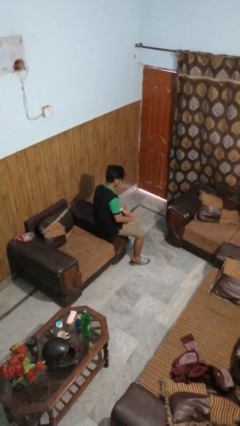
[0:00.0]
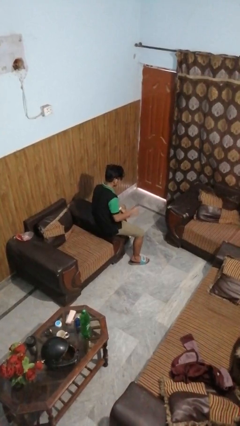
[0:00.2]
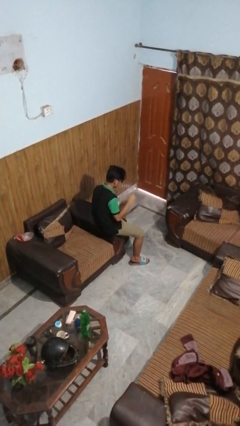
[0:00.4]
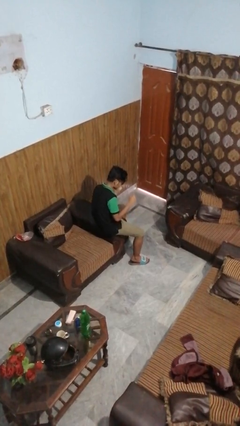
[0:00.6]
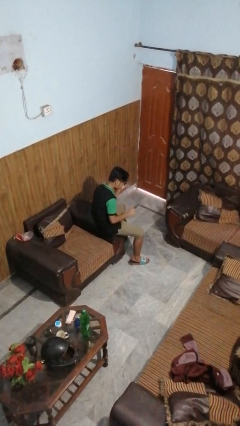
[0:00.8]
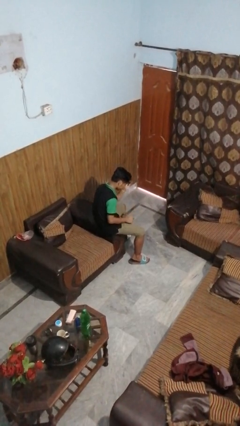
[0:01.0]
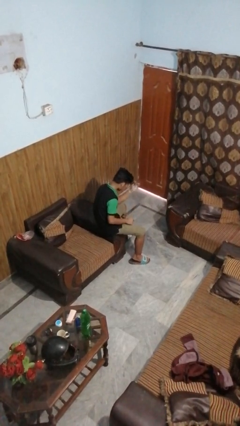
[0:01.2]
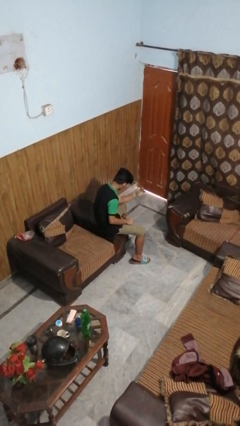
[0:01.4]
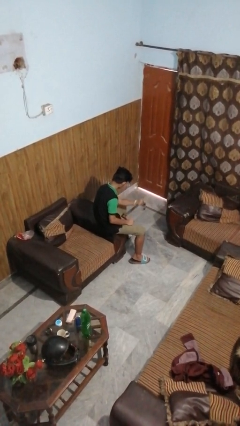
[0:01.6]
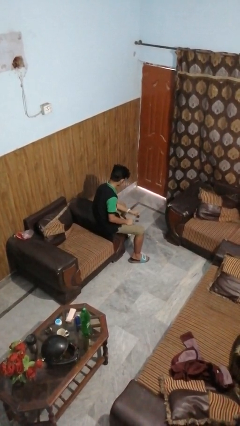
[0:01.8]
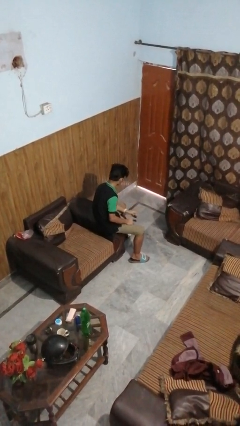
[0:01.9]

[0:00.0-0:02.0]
person takes off sunglasses

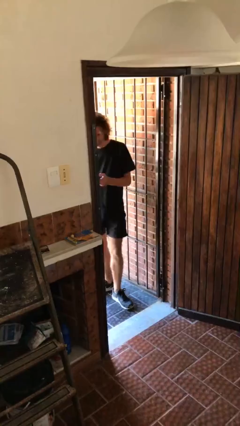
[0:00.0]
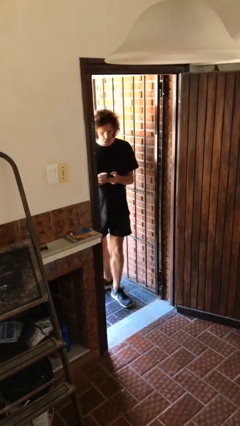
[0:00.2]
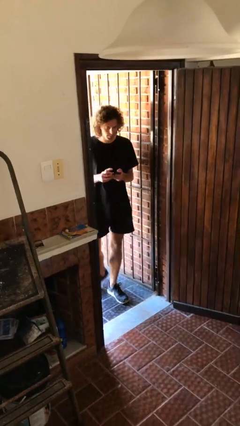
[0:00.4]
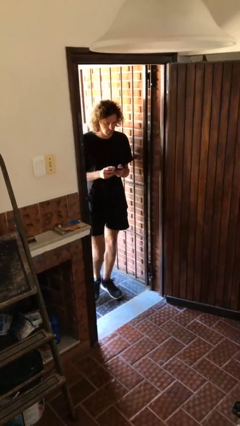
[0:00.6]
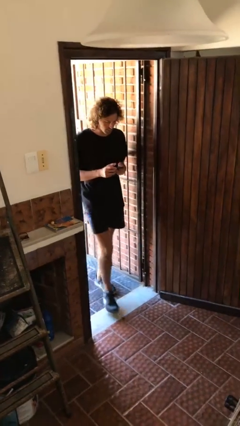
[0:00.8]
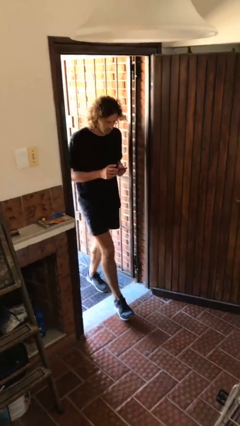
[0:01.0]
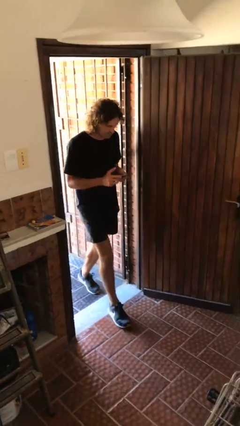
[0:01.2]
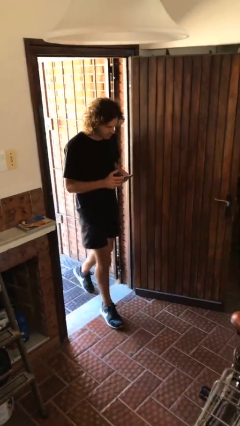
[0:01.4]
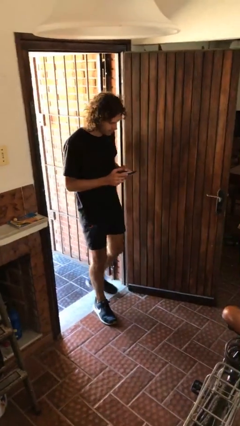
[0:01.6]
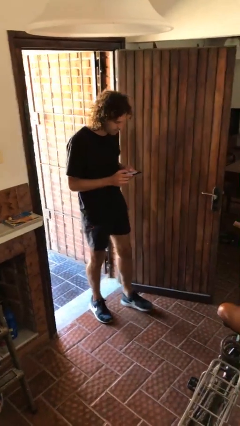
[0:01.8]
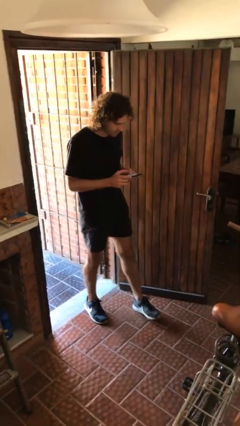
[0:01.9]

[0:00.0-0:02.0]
person enters scene through structure

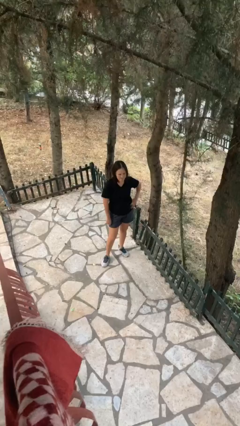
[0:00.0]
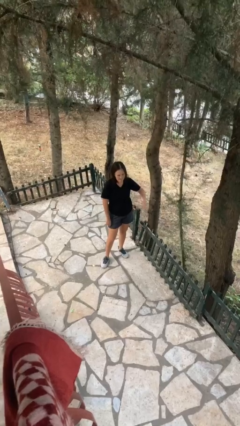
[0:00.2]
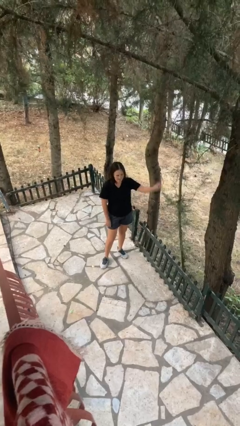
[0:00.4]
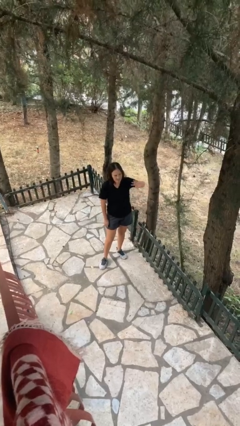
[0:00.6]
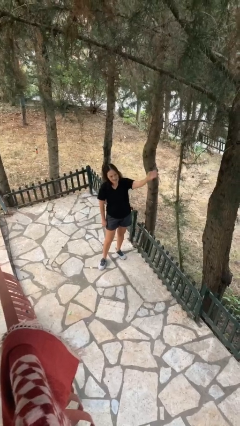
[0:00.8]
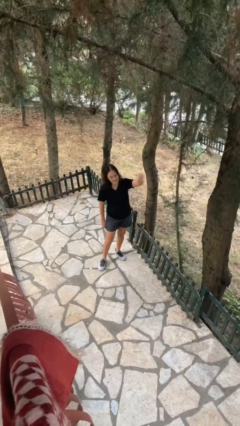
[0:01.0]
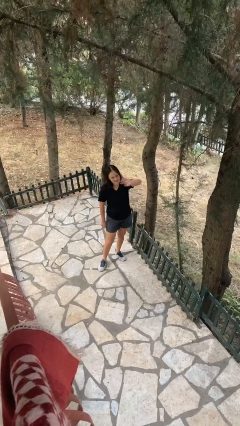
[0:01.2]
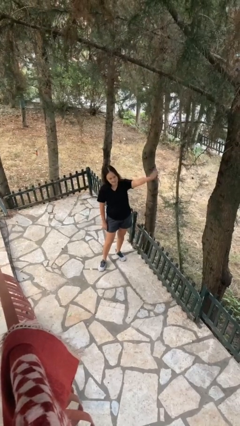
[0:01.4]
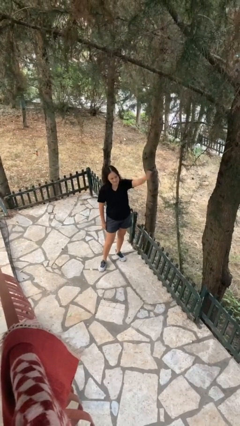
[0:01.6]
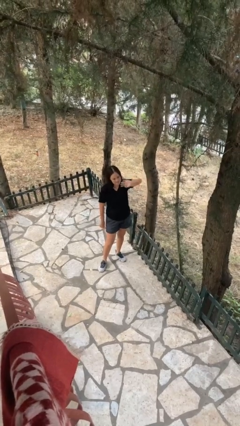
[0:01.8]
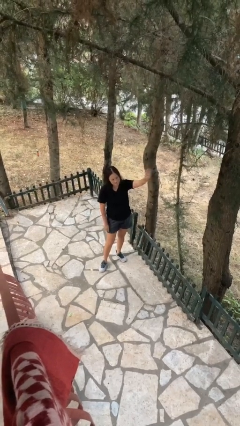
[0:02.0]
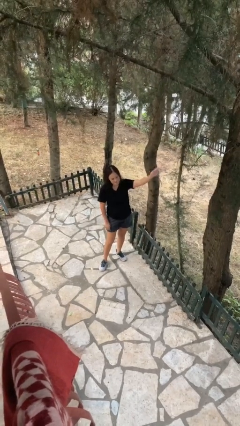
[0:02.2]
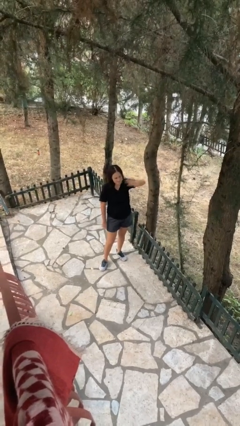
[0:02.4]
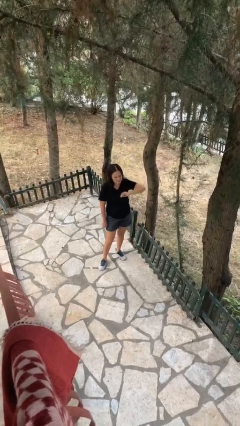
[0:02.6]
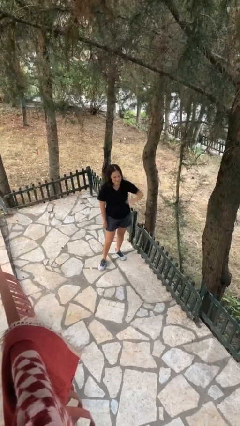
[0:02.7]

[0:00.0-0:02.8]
person waves at person

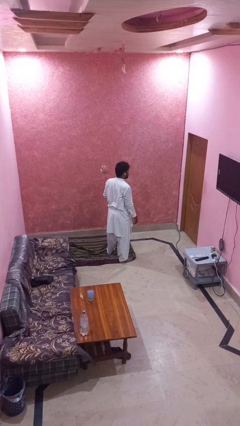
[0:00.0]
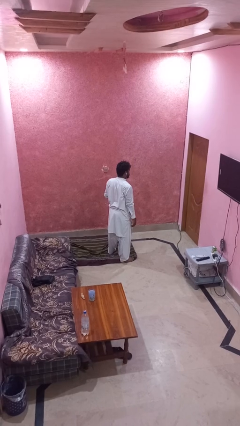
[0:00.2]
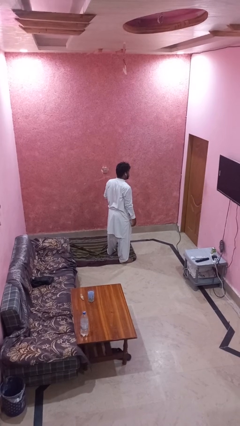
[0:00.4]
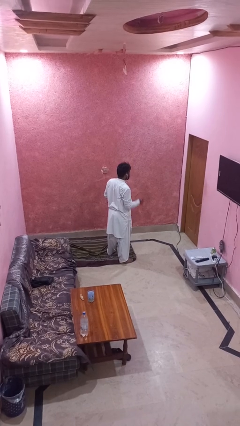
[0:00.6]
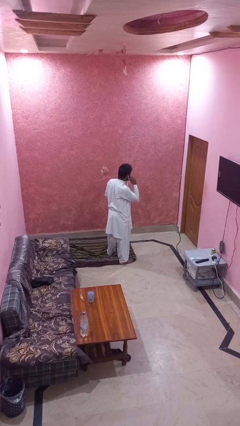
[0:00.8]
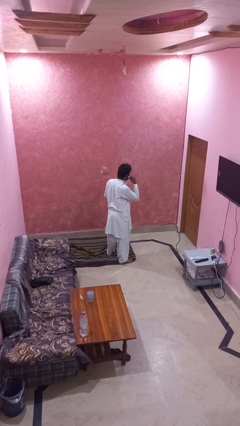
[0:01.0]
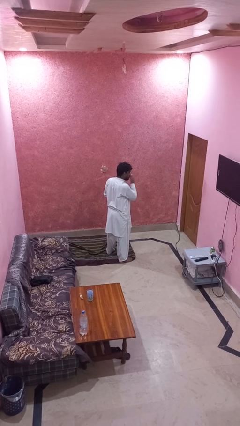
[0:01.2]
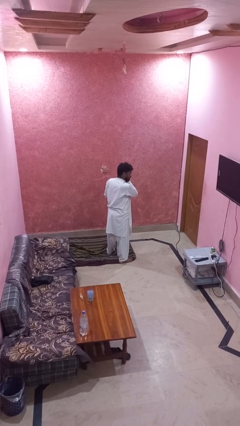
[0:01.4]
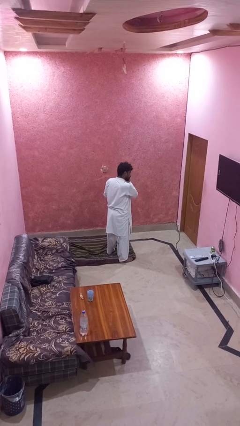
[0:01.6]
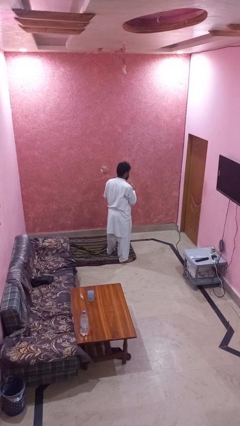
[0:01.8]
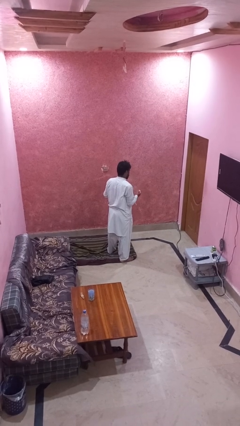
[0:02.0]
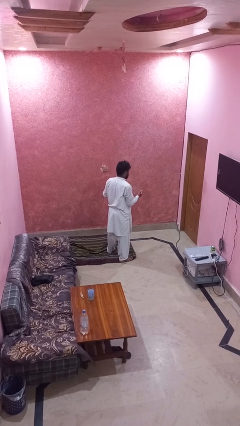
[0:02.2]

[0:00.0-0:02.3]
person takes off headphones

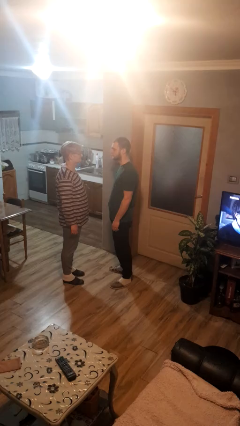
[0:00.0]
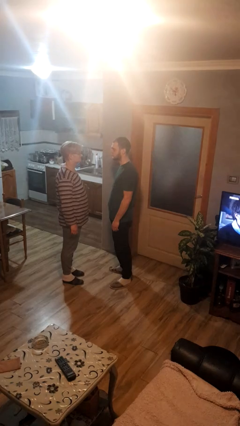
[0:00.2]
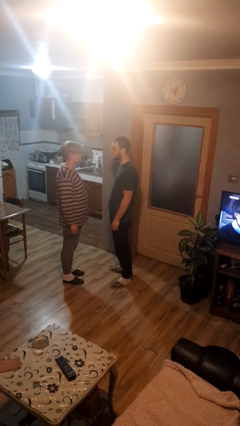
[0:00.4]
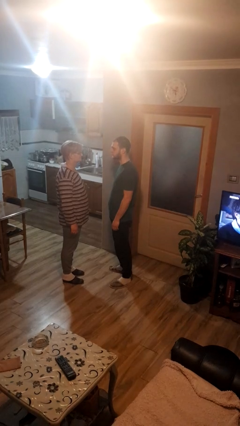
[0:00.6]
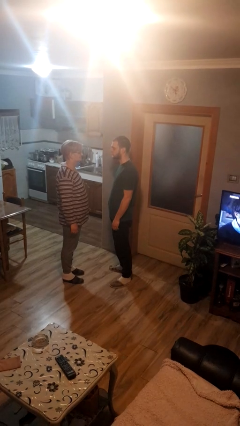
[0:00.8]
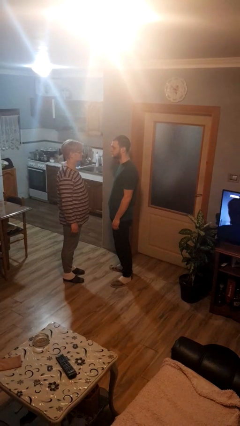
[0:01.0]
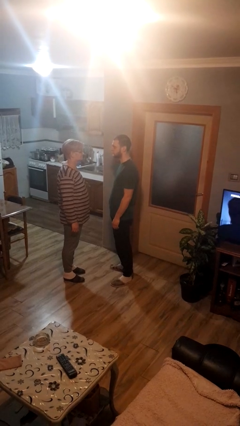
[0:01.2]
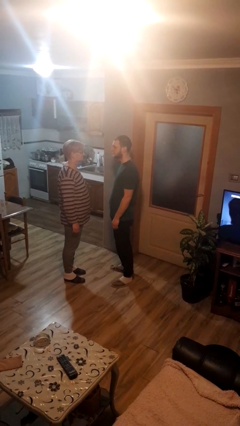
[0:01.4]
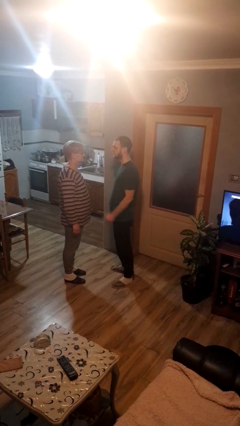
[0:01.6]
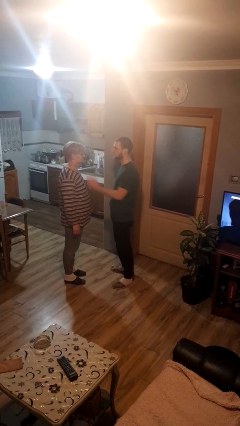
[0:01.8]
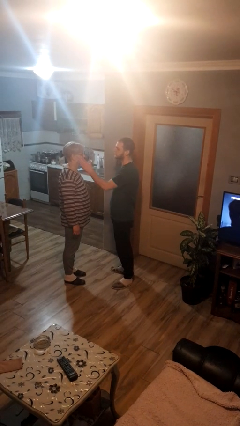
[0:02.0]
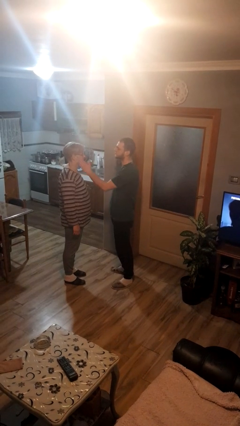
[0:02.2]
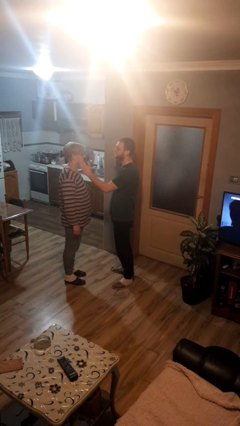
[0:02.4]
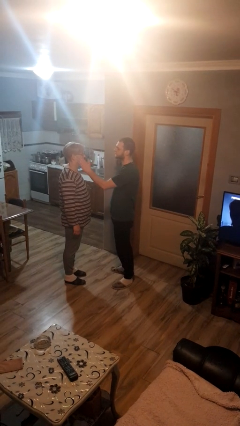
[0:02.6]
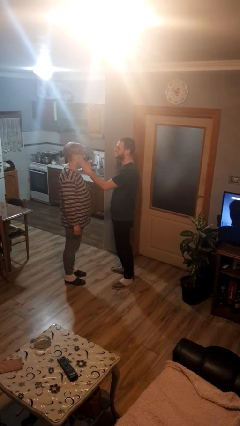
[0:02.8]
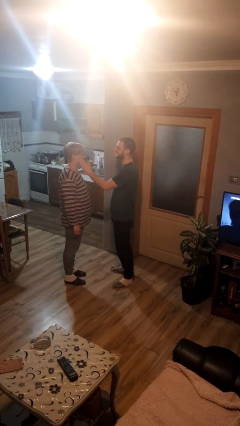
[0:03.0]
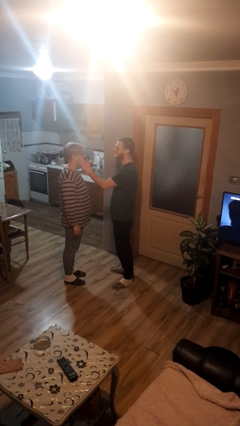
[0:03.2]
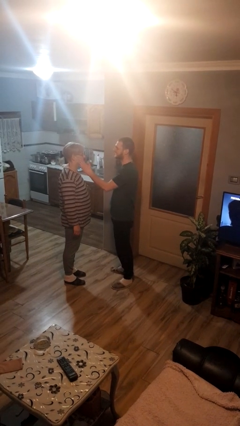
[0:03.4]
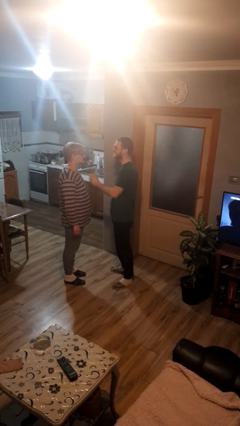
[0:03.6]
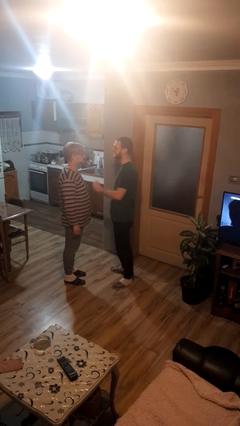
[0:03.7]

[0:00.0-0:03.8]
person touches face of person

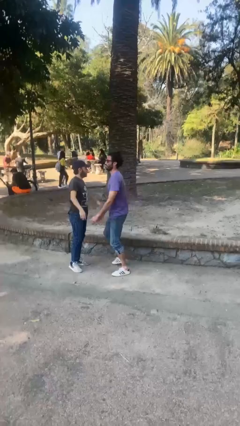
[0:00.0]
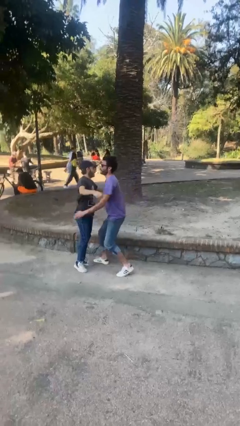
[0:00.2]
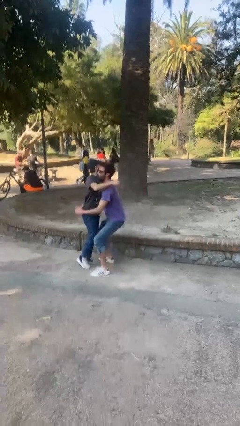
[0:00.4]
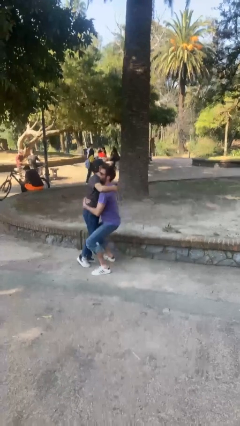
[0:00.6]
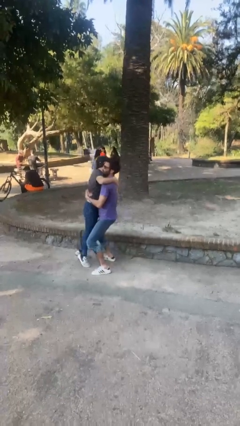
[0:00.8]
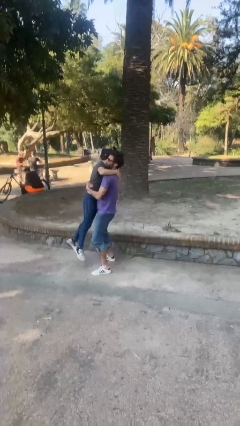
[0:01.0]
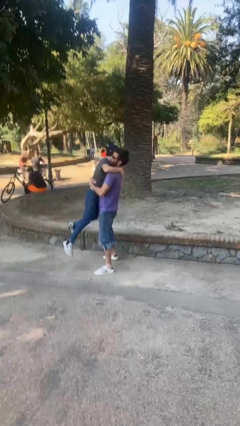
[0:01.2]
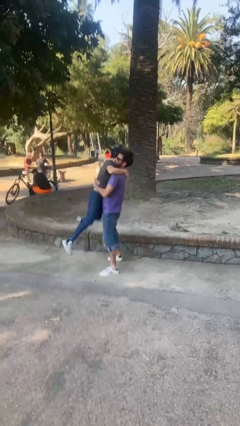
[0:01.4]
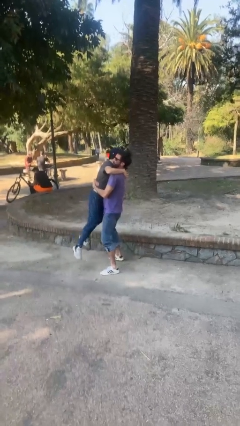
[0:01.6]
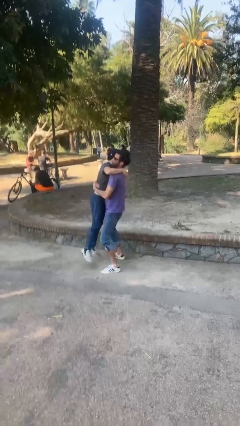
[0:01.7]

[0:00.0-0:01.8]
person picks up person

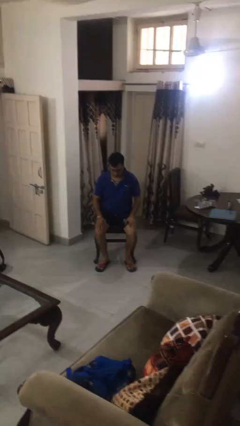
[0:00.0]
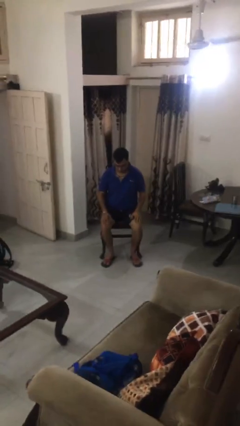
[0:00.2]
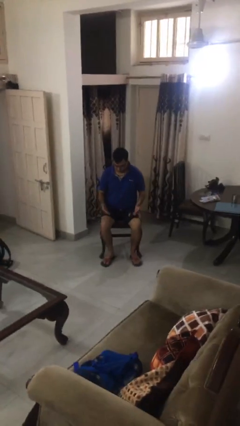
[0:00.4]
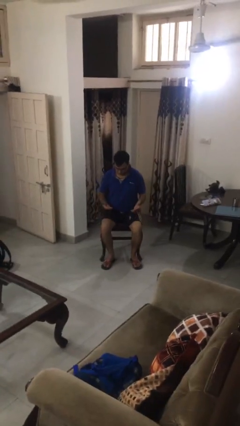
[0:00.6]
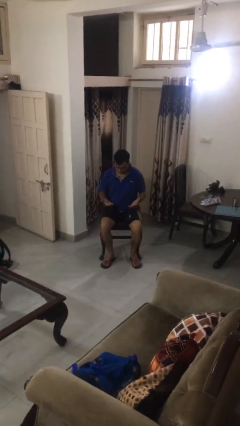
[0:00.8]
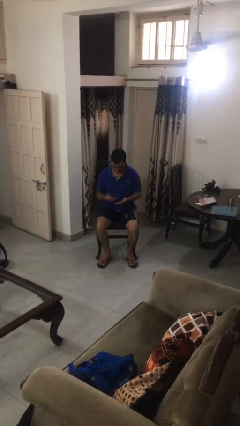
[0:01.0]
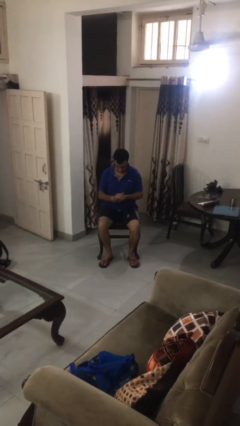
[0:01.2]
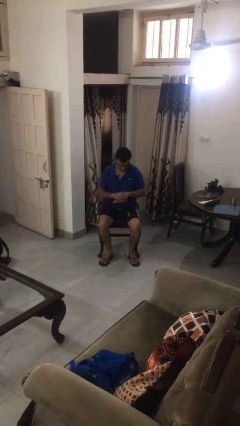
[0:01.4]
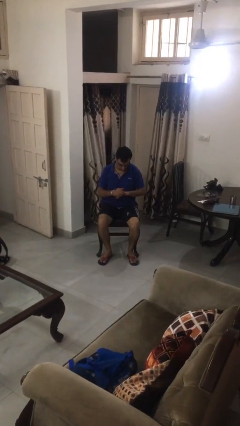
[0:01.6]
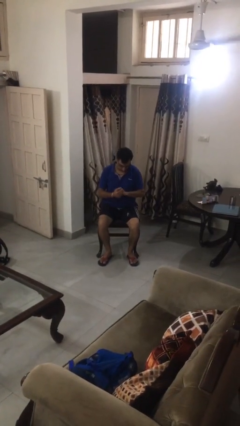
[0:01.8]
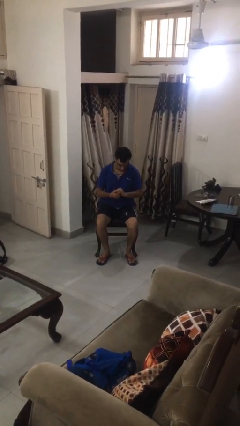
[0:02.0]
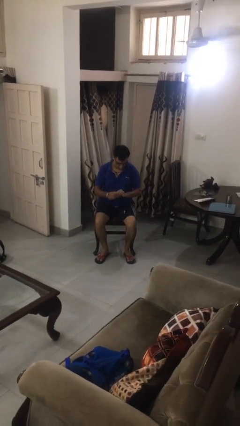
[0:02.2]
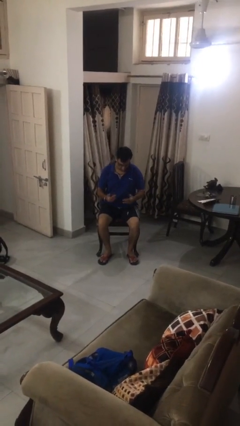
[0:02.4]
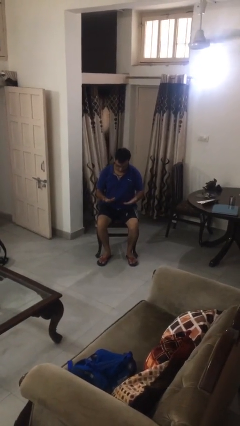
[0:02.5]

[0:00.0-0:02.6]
person looks at hands in lap
